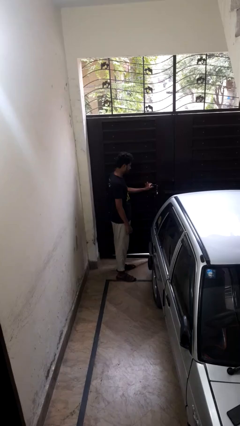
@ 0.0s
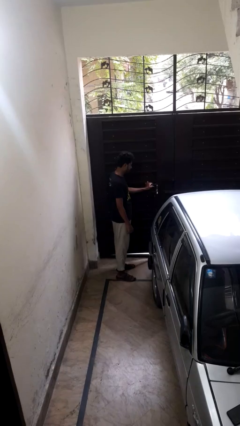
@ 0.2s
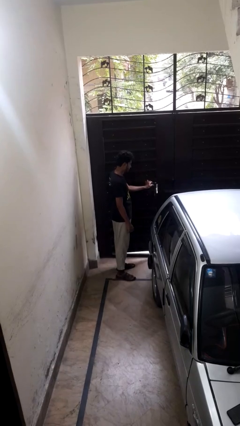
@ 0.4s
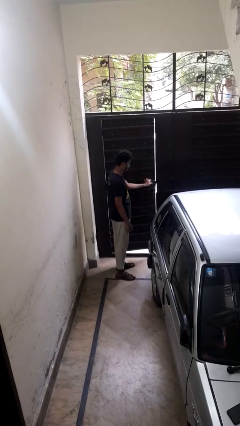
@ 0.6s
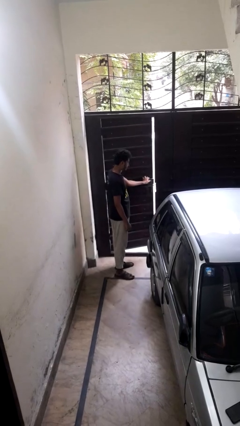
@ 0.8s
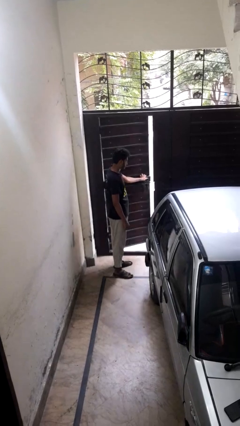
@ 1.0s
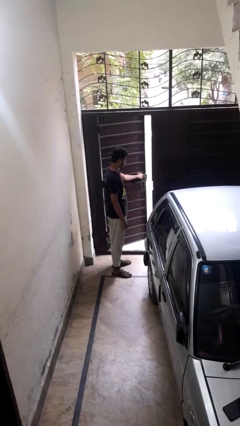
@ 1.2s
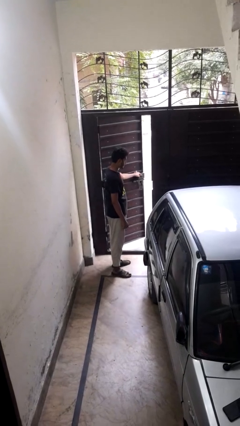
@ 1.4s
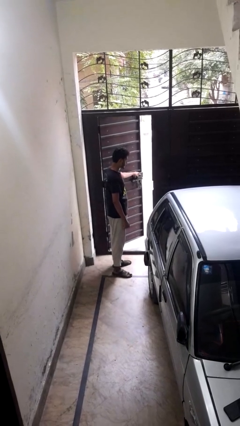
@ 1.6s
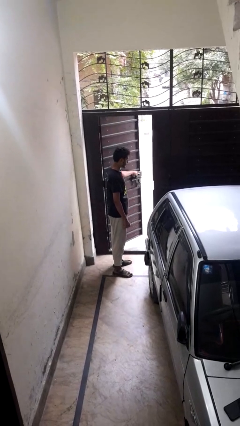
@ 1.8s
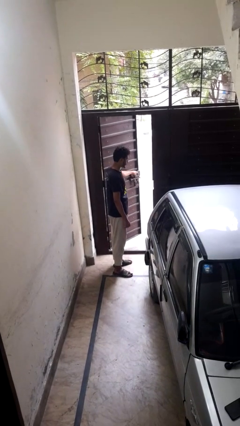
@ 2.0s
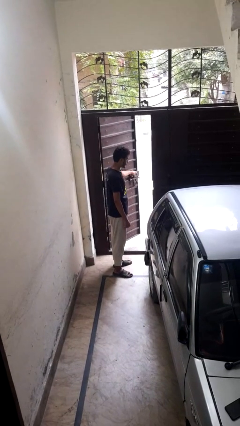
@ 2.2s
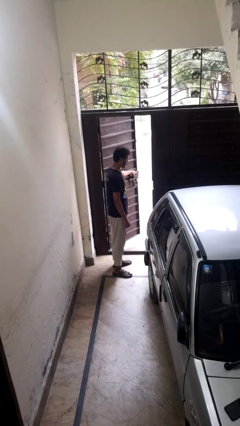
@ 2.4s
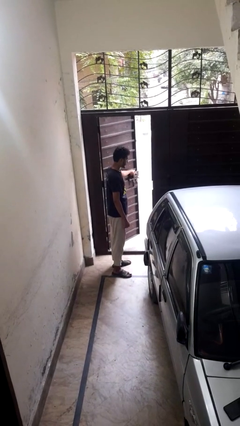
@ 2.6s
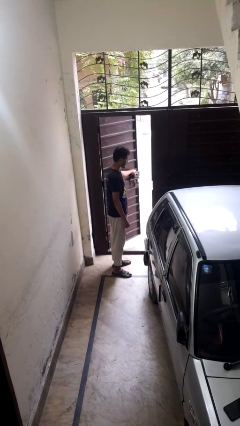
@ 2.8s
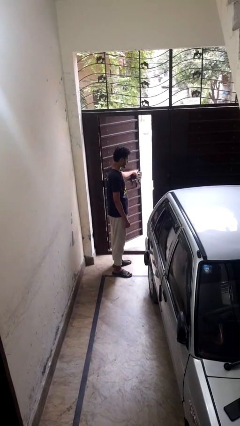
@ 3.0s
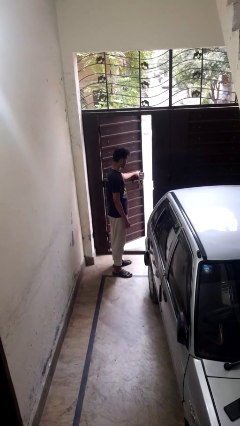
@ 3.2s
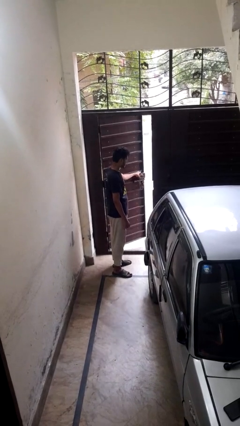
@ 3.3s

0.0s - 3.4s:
person opens gate

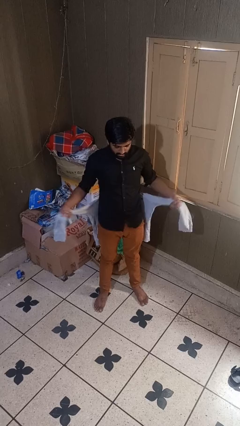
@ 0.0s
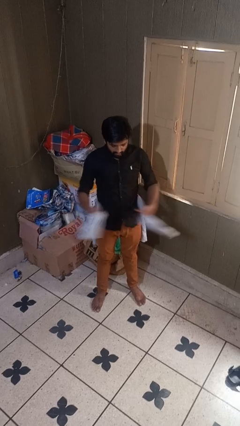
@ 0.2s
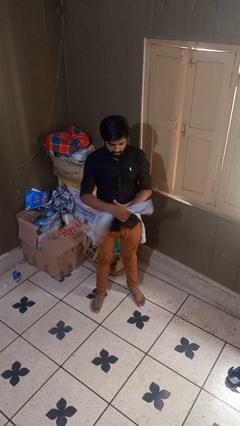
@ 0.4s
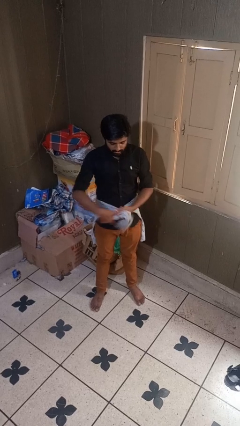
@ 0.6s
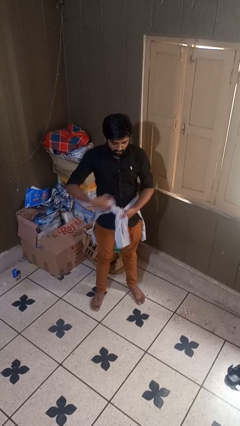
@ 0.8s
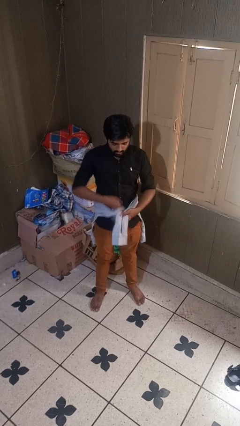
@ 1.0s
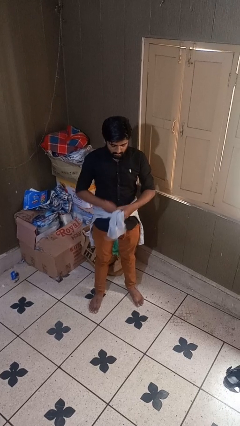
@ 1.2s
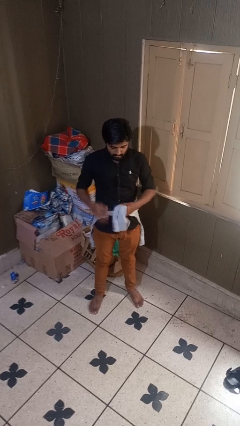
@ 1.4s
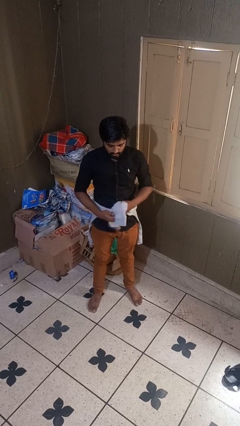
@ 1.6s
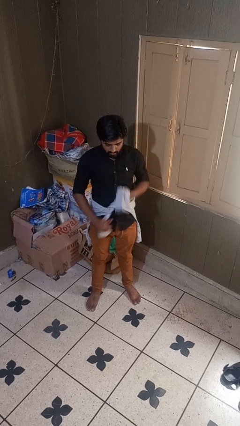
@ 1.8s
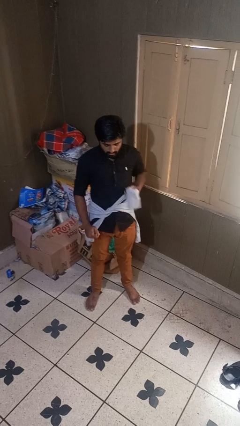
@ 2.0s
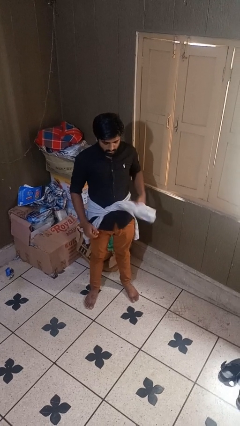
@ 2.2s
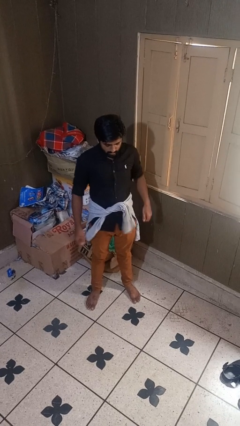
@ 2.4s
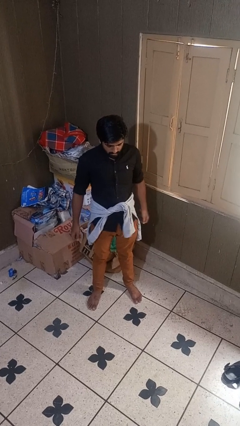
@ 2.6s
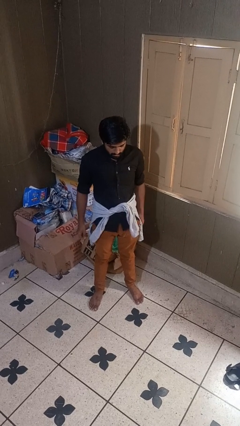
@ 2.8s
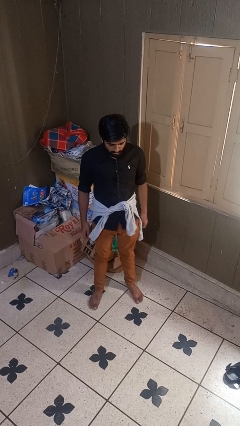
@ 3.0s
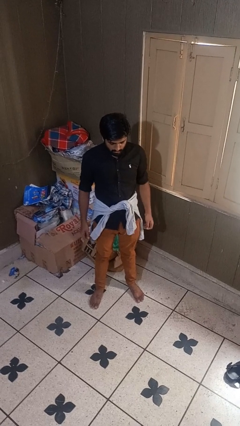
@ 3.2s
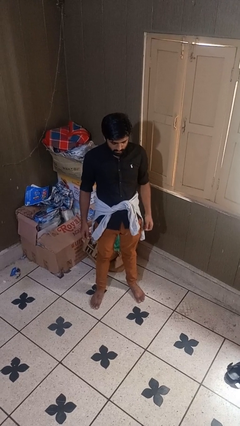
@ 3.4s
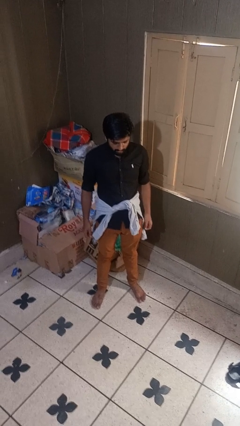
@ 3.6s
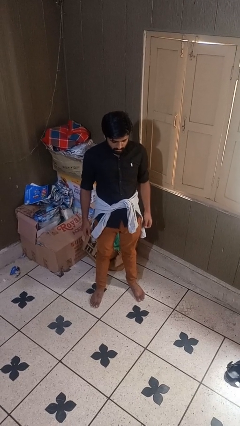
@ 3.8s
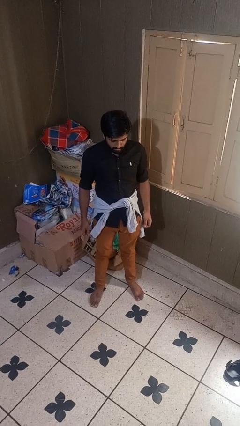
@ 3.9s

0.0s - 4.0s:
person ties jacket around waist

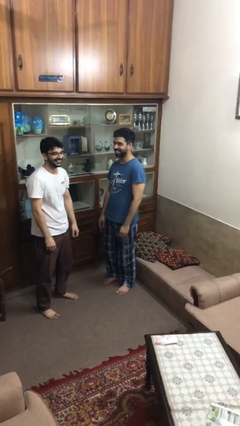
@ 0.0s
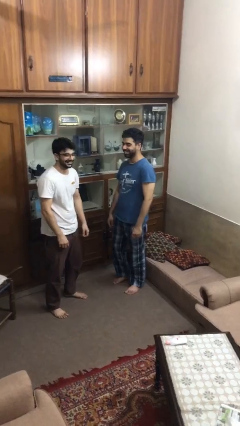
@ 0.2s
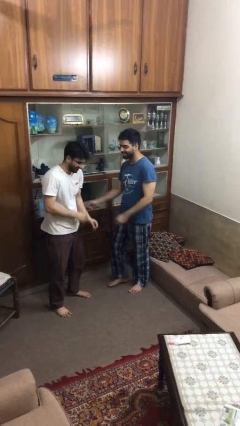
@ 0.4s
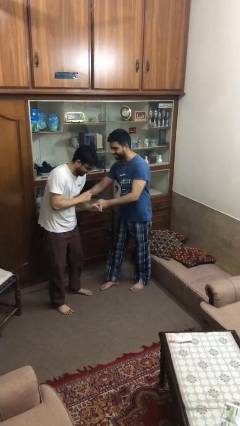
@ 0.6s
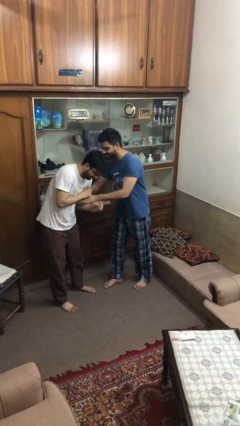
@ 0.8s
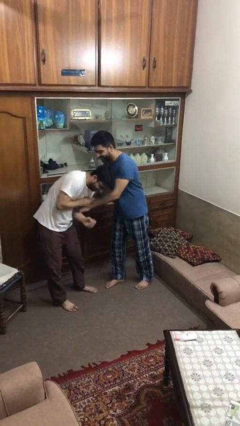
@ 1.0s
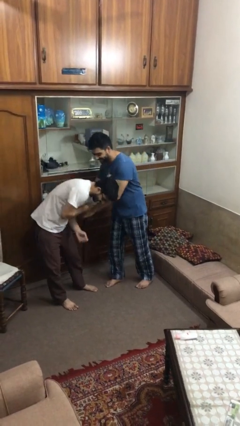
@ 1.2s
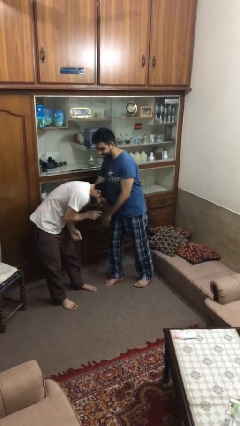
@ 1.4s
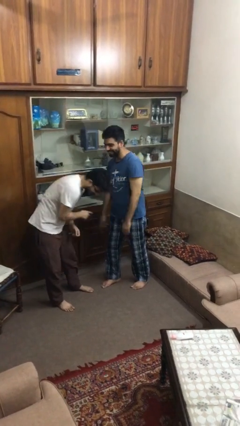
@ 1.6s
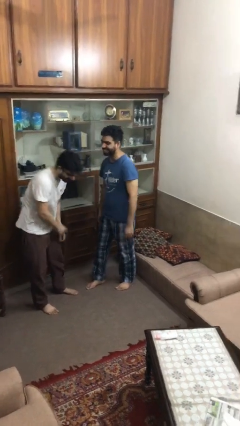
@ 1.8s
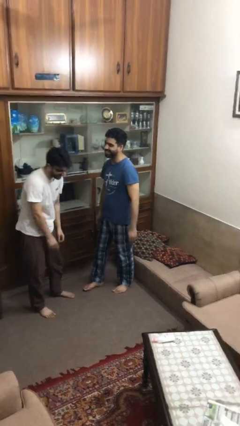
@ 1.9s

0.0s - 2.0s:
person tickles person

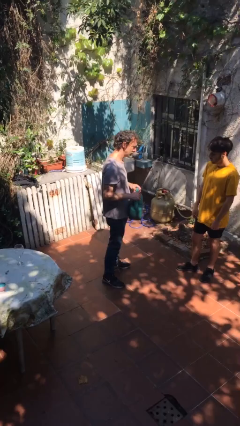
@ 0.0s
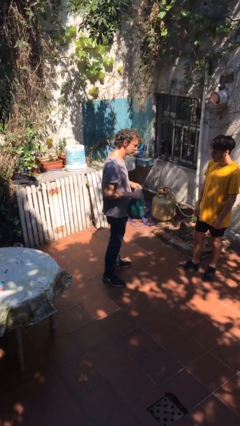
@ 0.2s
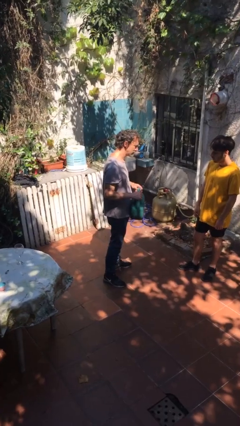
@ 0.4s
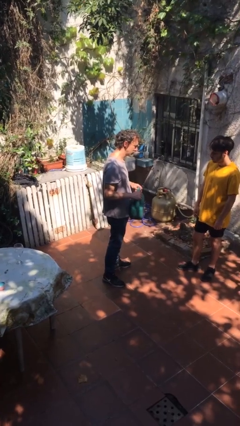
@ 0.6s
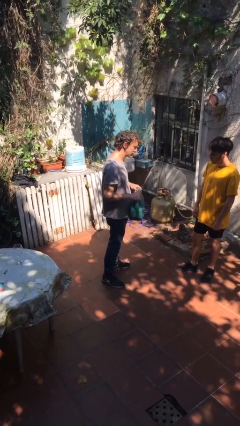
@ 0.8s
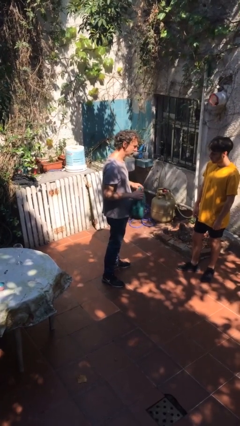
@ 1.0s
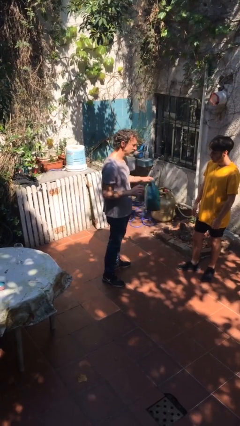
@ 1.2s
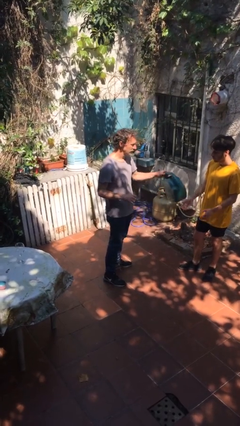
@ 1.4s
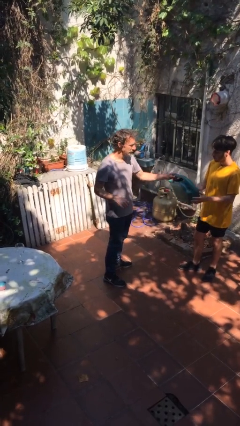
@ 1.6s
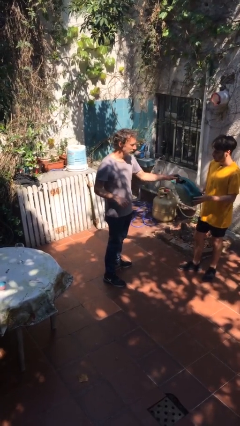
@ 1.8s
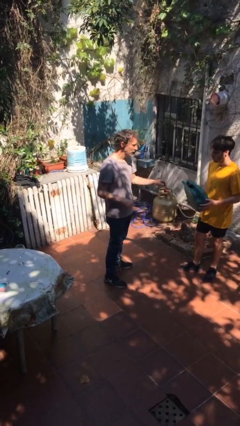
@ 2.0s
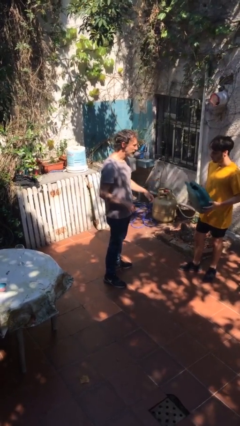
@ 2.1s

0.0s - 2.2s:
person transfers object to person

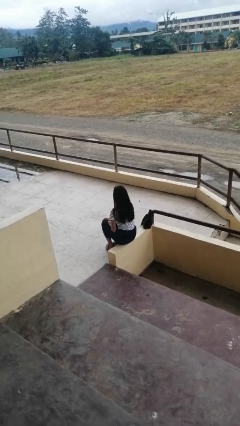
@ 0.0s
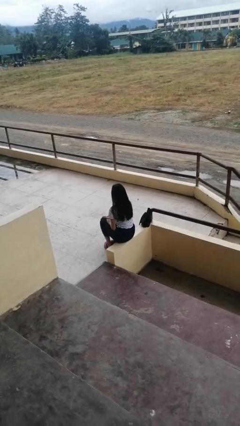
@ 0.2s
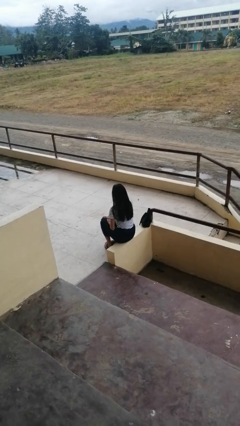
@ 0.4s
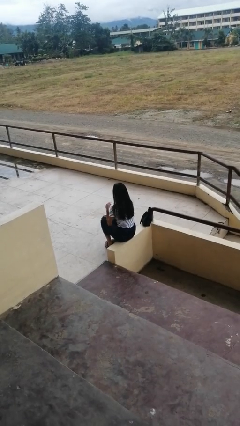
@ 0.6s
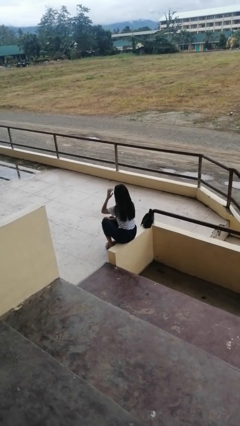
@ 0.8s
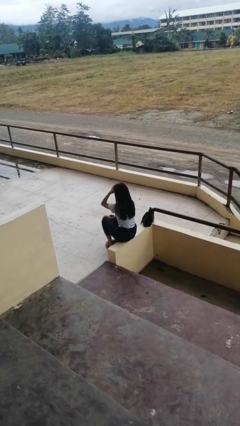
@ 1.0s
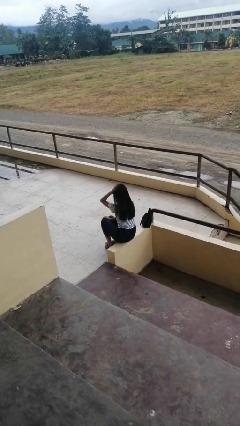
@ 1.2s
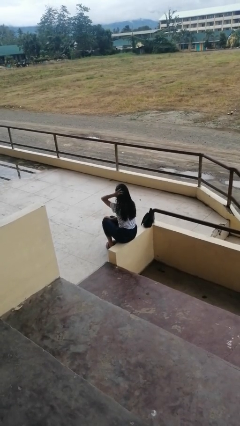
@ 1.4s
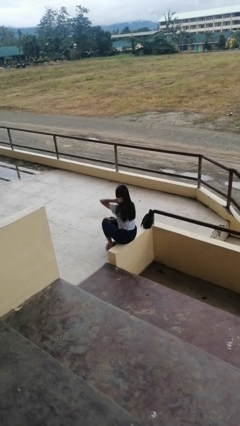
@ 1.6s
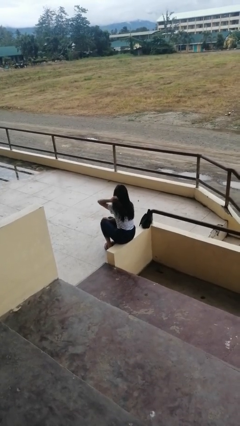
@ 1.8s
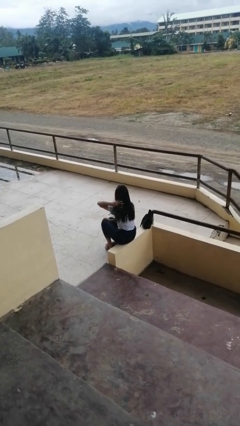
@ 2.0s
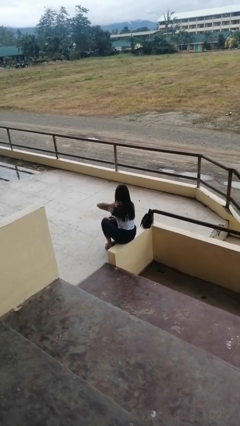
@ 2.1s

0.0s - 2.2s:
person strokes hair

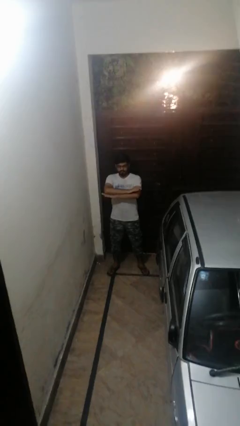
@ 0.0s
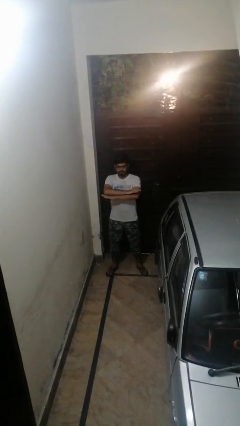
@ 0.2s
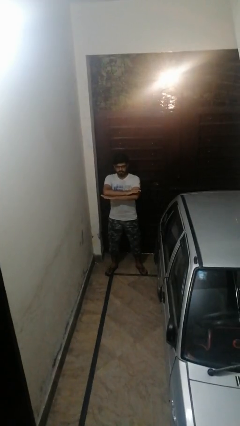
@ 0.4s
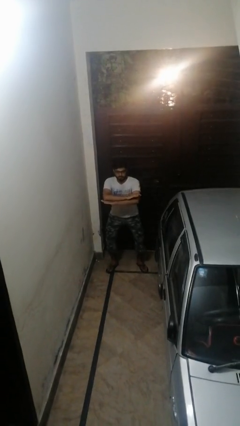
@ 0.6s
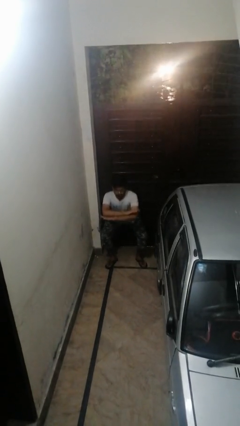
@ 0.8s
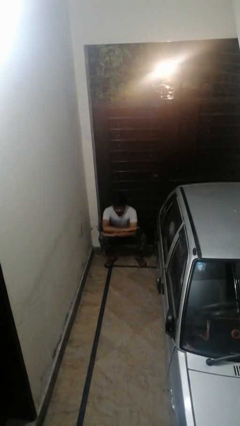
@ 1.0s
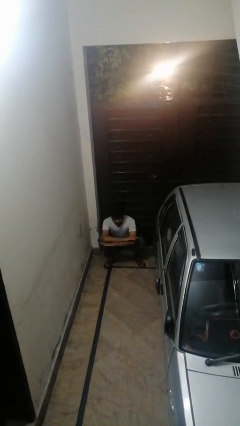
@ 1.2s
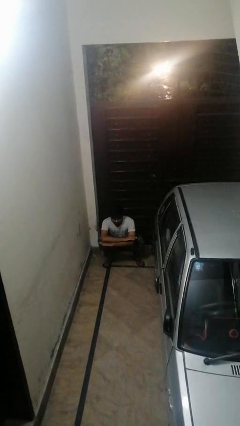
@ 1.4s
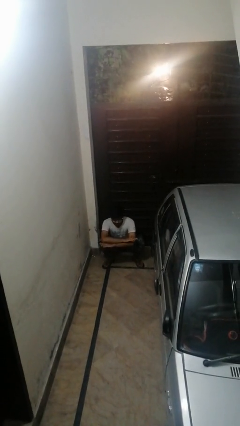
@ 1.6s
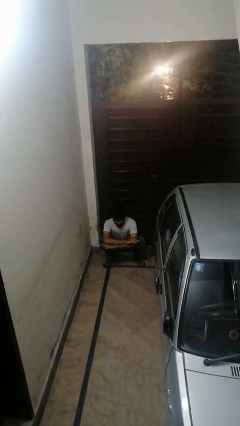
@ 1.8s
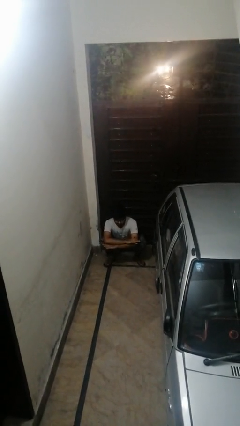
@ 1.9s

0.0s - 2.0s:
person squats

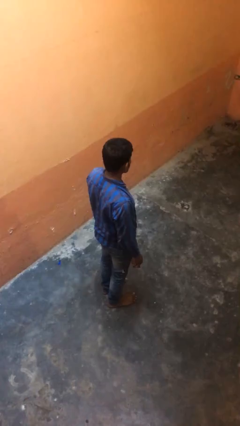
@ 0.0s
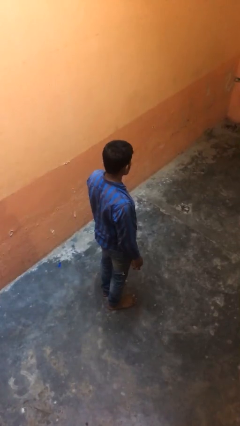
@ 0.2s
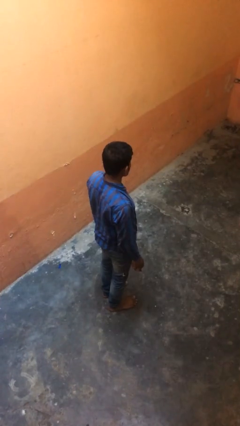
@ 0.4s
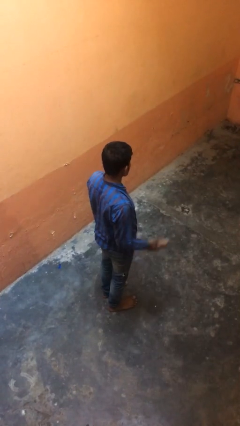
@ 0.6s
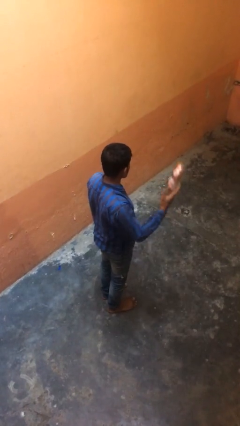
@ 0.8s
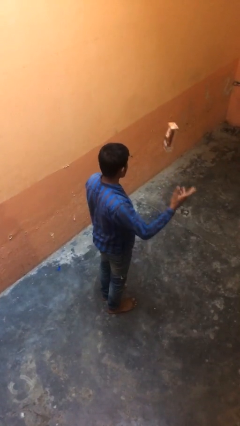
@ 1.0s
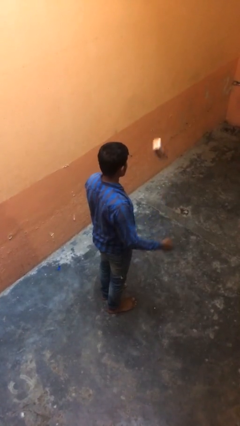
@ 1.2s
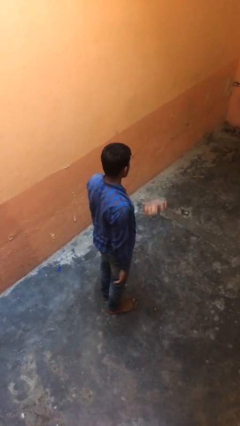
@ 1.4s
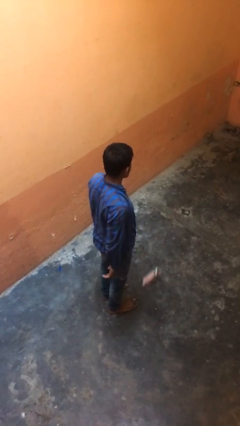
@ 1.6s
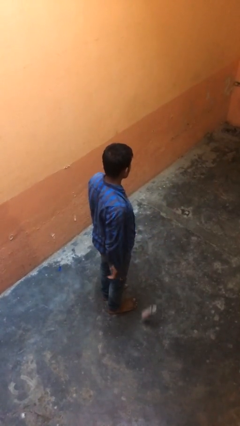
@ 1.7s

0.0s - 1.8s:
person throws object into air
